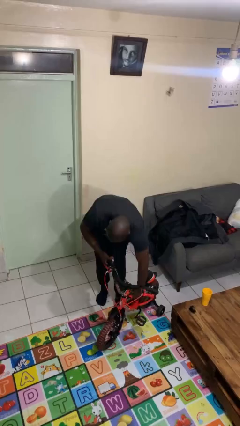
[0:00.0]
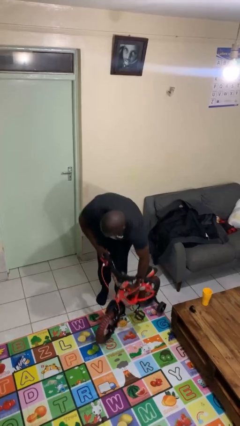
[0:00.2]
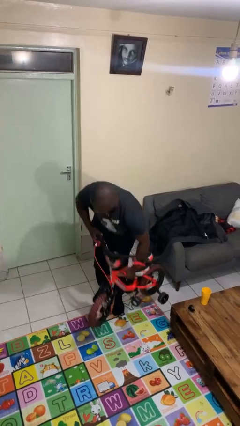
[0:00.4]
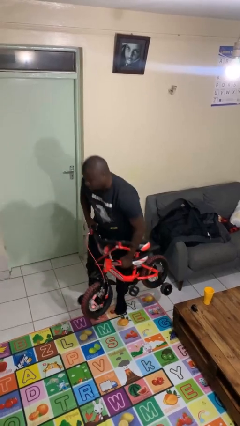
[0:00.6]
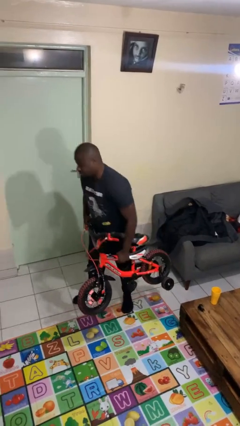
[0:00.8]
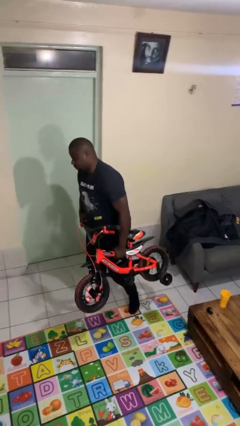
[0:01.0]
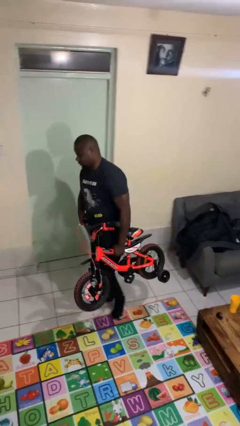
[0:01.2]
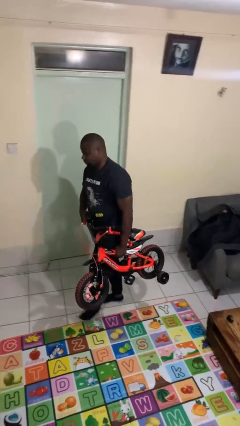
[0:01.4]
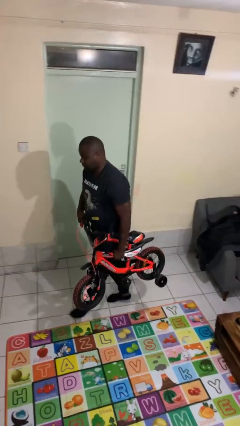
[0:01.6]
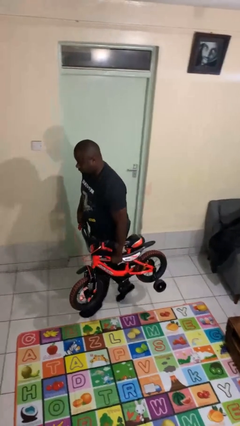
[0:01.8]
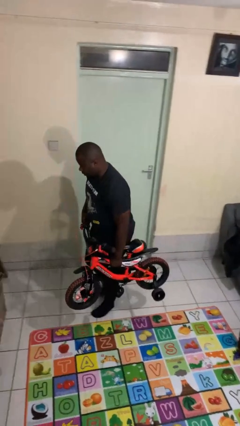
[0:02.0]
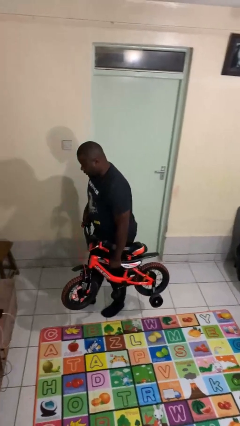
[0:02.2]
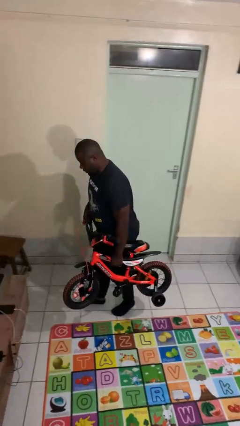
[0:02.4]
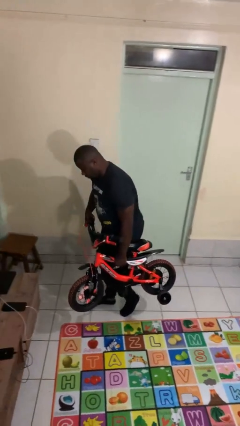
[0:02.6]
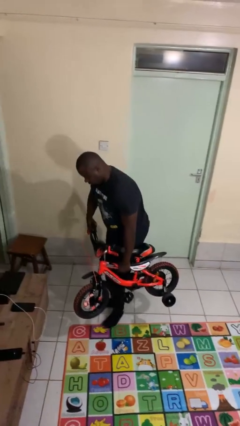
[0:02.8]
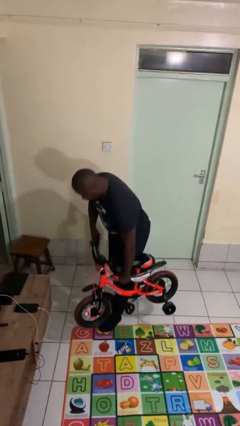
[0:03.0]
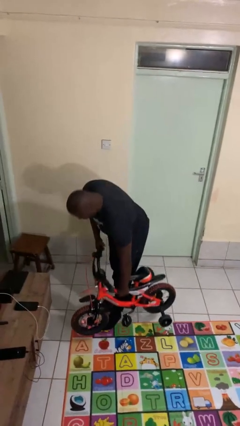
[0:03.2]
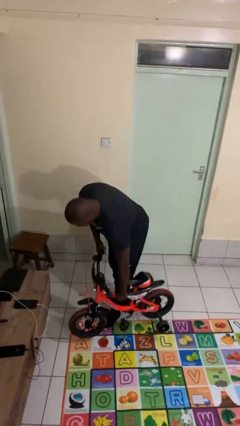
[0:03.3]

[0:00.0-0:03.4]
person carries bicycle

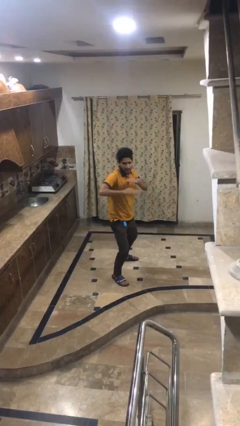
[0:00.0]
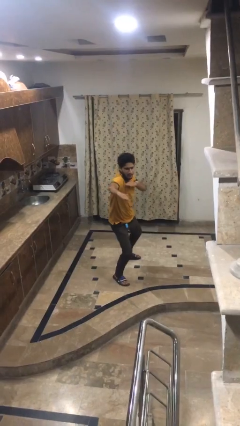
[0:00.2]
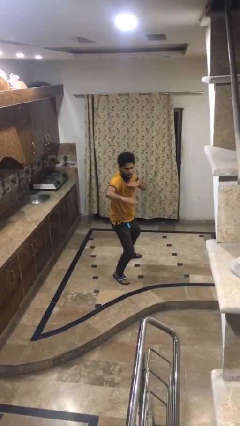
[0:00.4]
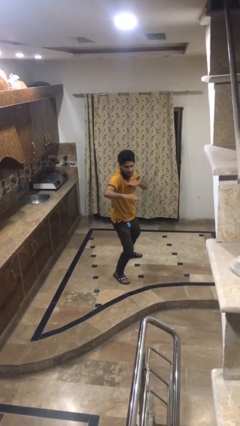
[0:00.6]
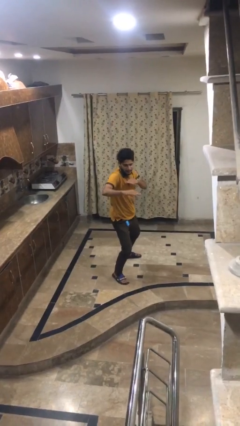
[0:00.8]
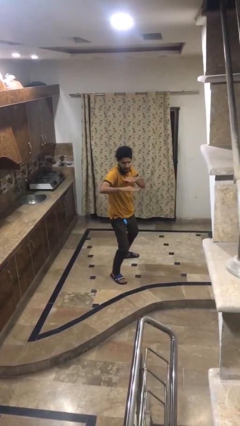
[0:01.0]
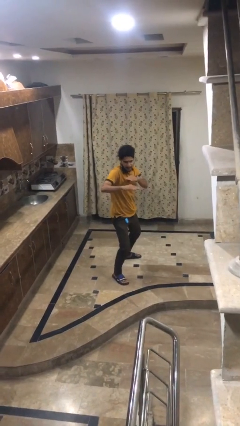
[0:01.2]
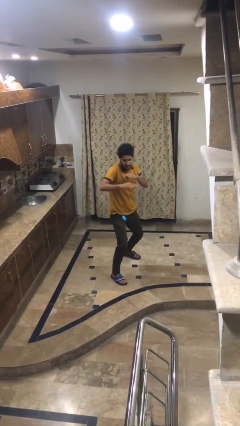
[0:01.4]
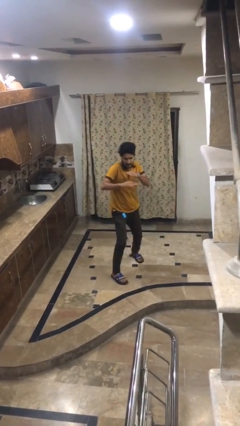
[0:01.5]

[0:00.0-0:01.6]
person karate chop

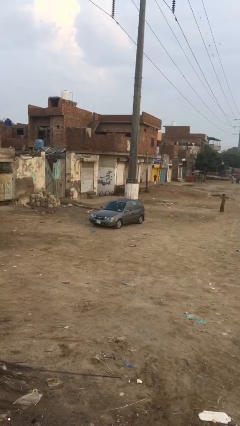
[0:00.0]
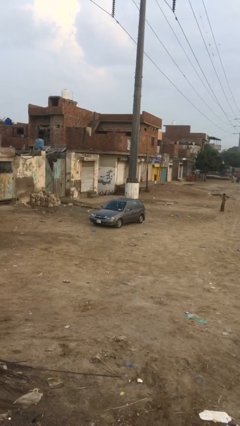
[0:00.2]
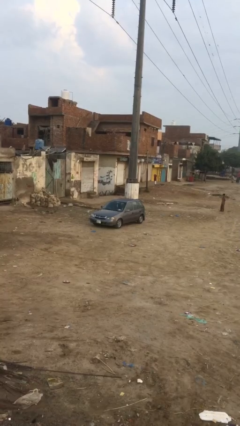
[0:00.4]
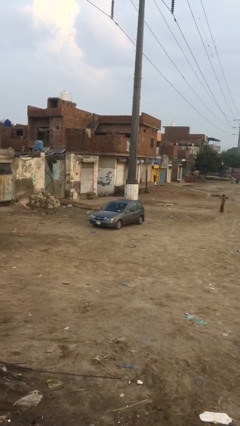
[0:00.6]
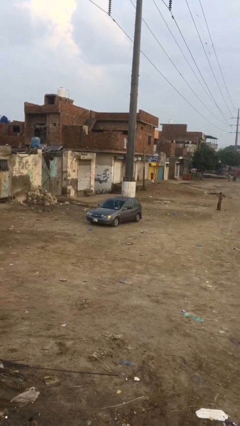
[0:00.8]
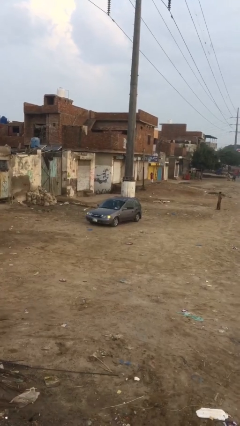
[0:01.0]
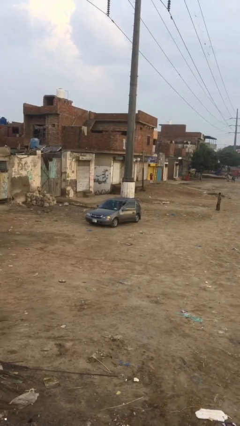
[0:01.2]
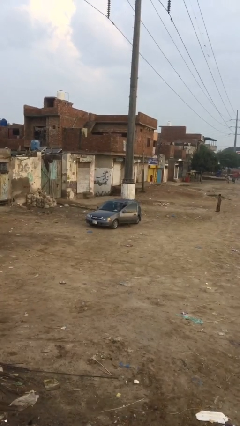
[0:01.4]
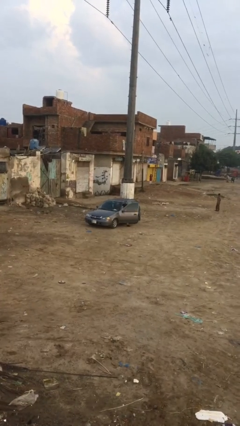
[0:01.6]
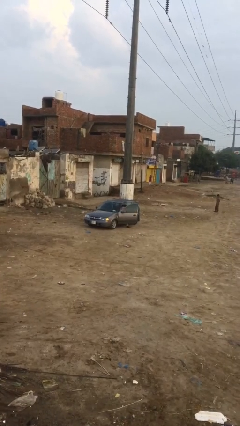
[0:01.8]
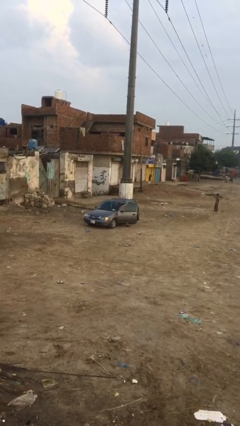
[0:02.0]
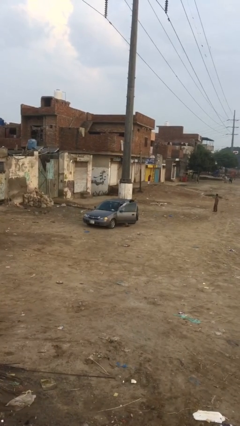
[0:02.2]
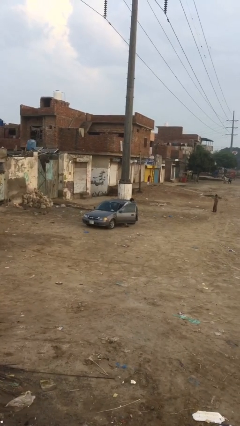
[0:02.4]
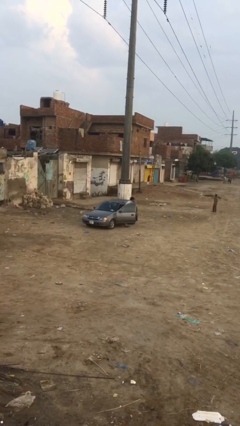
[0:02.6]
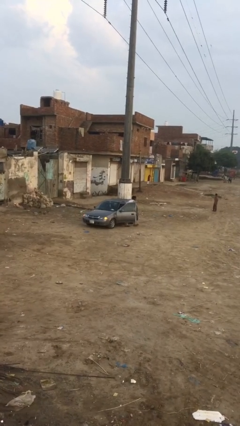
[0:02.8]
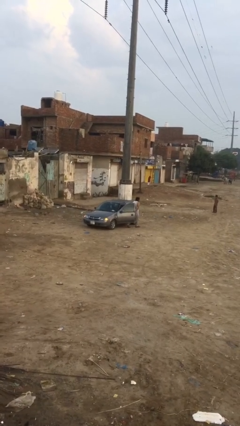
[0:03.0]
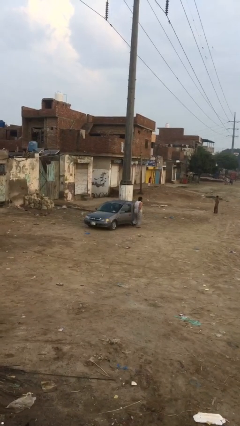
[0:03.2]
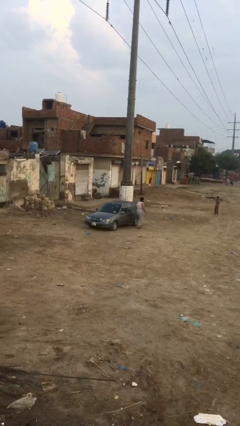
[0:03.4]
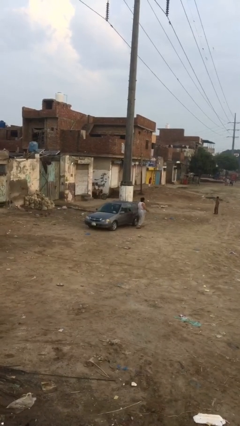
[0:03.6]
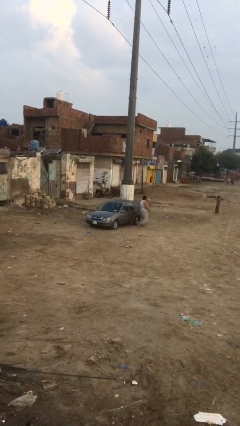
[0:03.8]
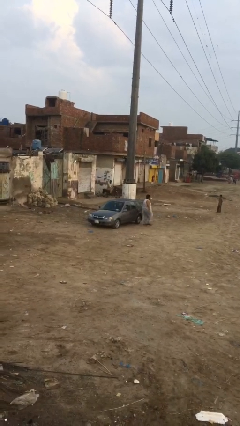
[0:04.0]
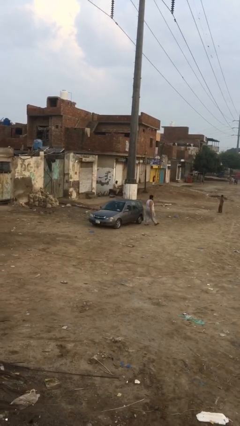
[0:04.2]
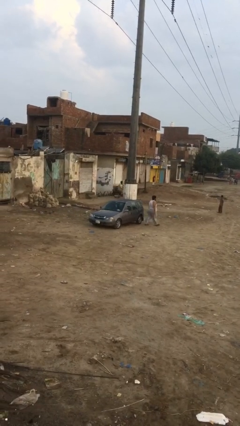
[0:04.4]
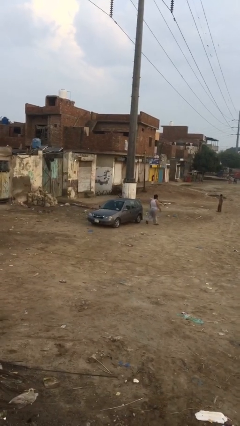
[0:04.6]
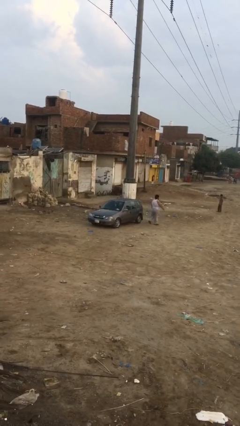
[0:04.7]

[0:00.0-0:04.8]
car drops off person

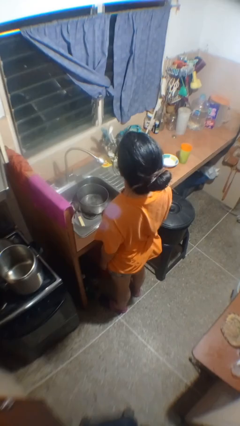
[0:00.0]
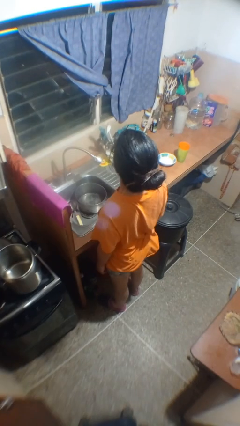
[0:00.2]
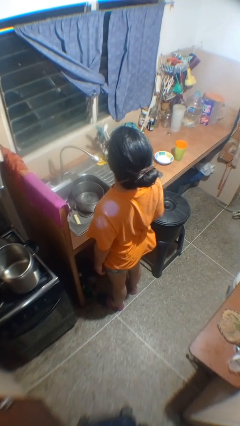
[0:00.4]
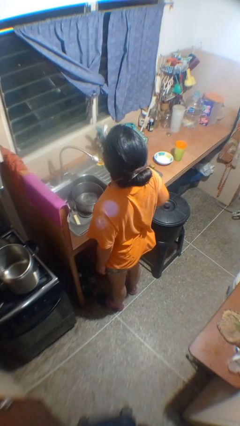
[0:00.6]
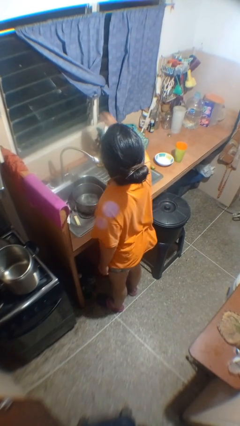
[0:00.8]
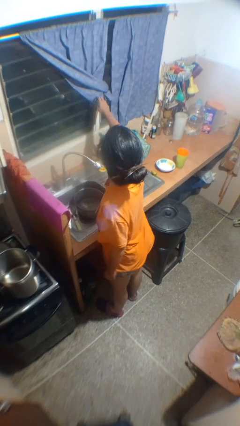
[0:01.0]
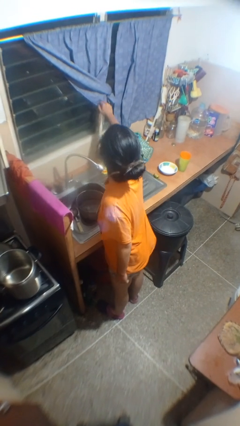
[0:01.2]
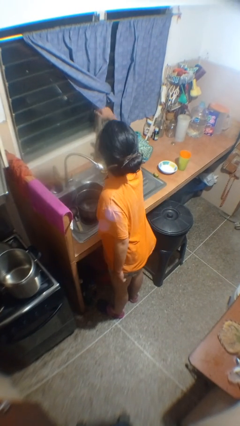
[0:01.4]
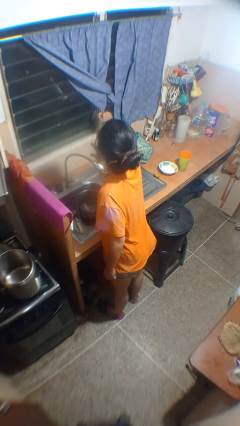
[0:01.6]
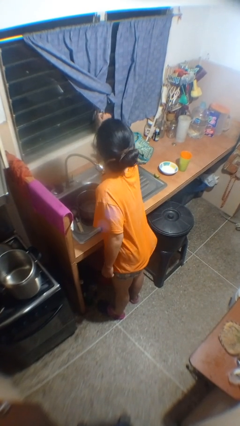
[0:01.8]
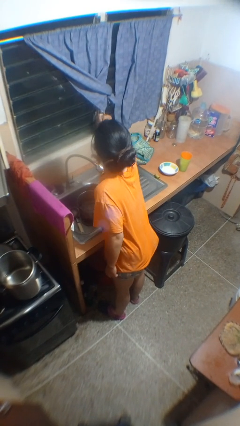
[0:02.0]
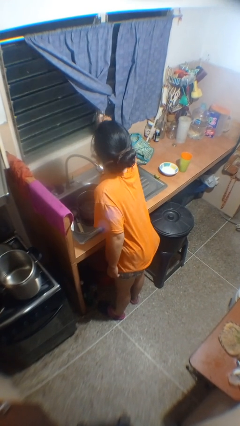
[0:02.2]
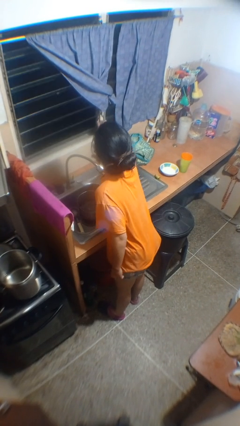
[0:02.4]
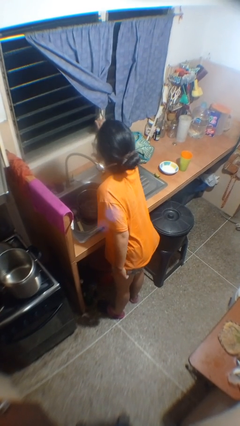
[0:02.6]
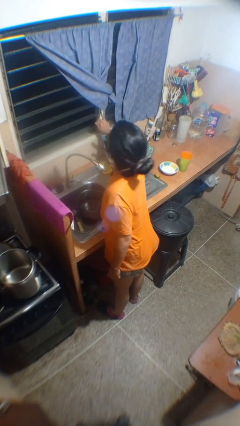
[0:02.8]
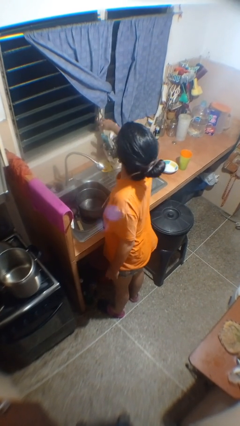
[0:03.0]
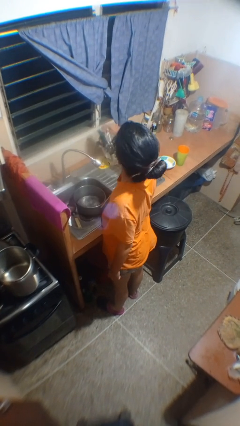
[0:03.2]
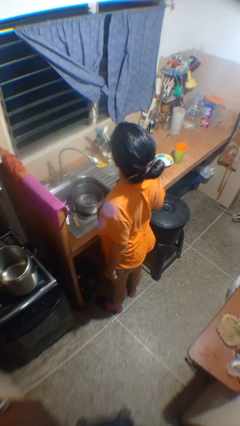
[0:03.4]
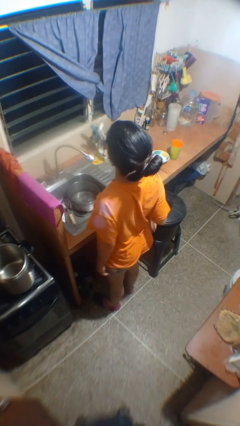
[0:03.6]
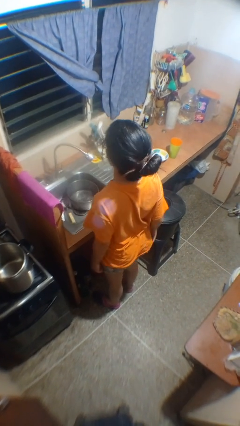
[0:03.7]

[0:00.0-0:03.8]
person opens home window

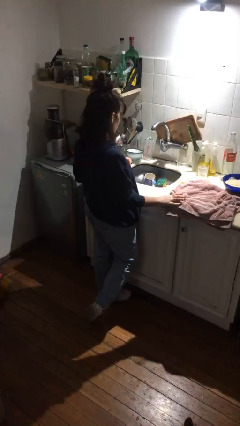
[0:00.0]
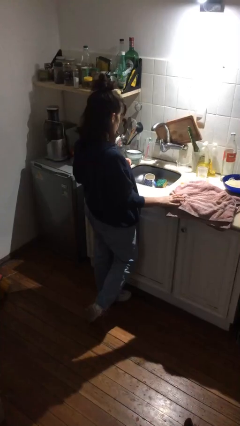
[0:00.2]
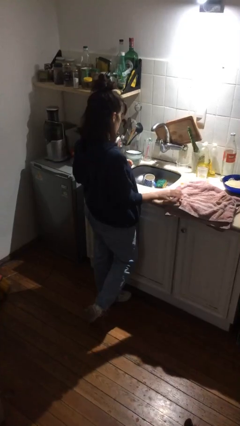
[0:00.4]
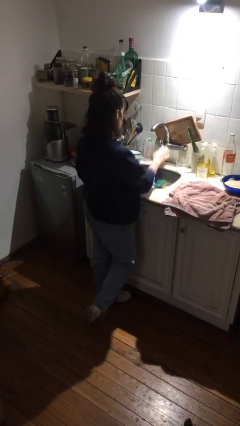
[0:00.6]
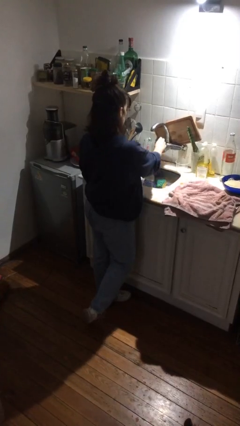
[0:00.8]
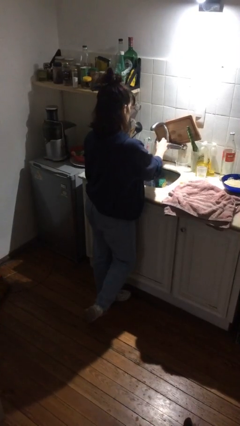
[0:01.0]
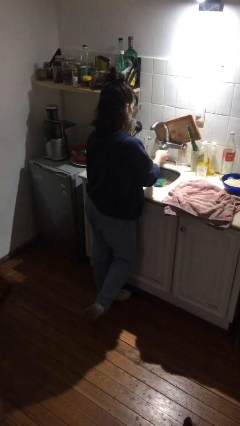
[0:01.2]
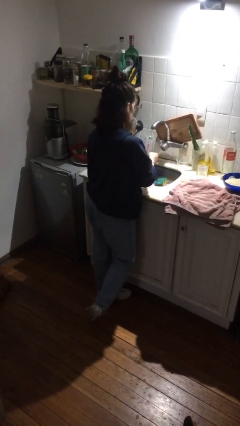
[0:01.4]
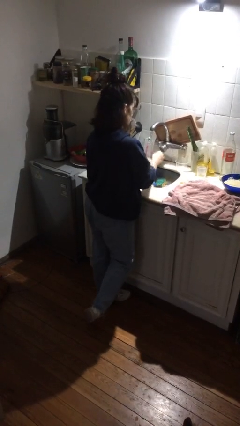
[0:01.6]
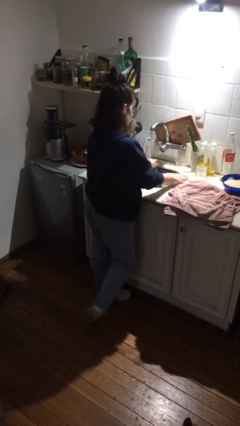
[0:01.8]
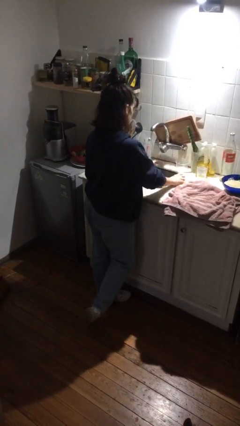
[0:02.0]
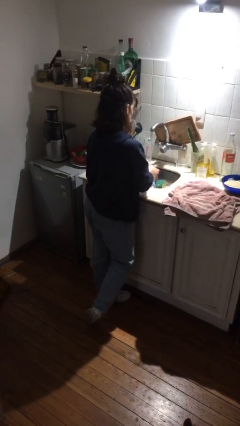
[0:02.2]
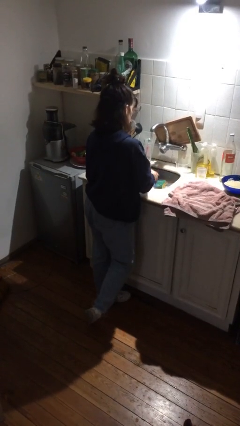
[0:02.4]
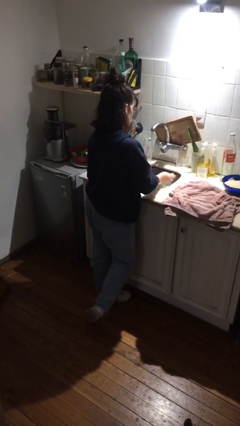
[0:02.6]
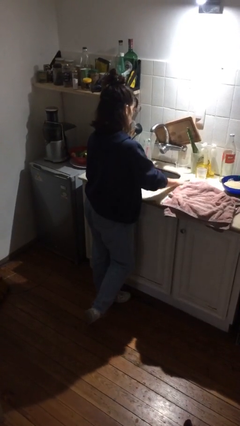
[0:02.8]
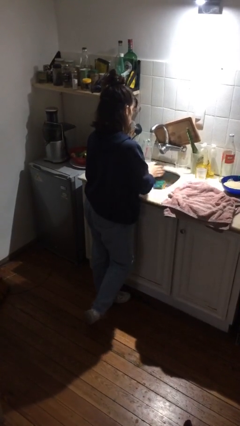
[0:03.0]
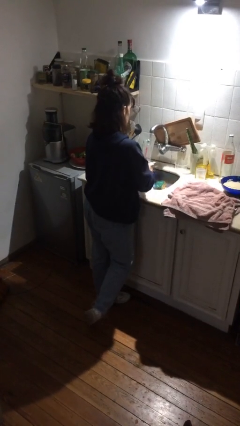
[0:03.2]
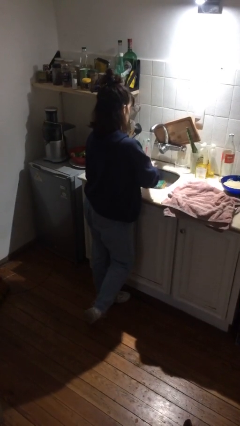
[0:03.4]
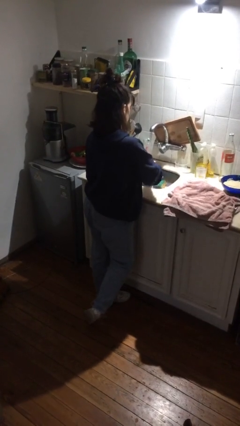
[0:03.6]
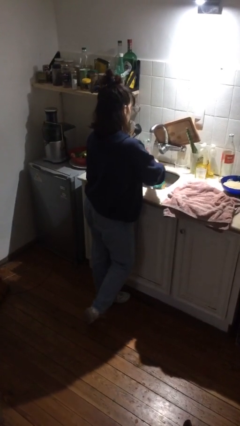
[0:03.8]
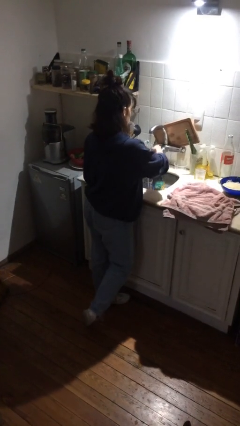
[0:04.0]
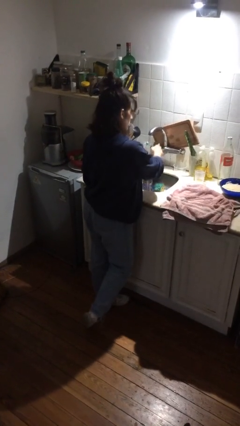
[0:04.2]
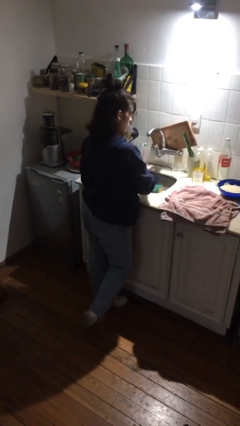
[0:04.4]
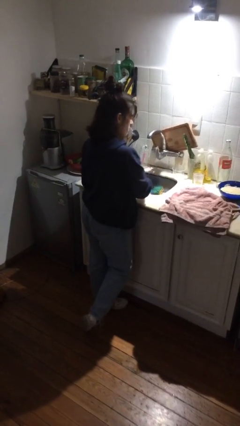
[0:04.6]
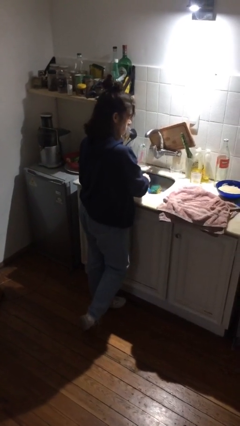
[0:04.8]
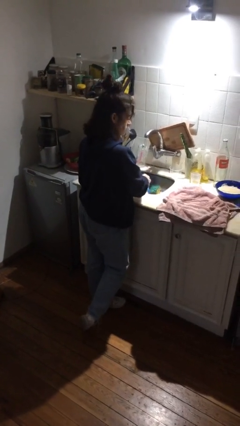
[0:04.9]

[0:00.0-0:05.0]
person washes hands
